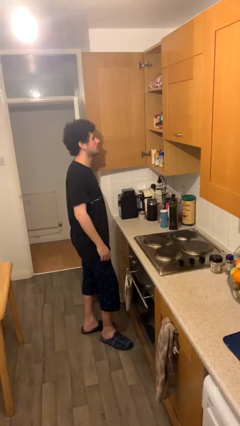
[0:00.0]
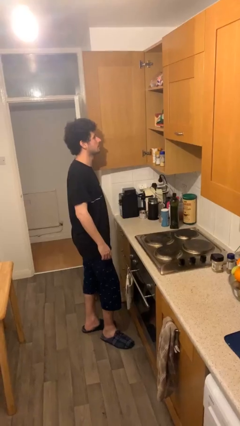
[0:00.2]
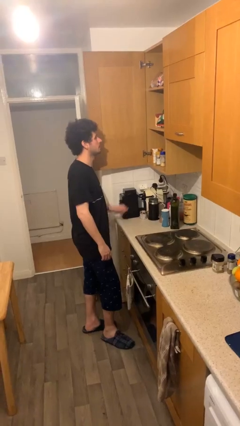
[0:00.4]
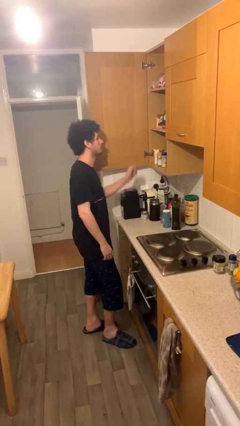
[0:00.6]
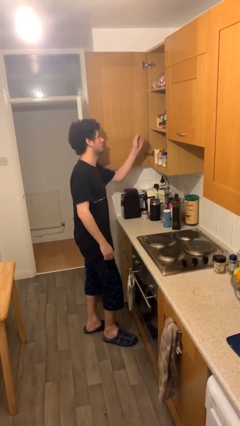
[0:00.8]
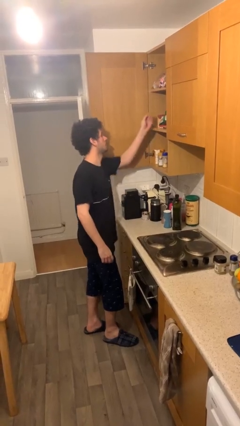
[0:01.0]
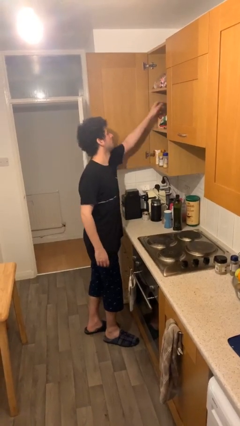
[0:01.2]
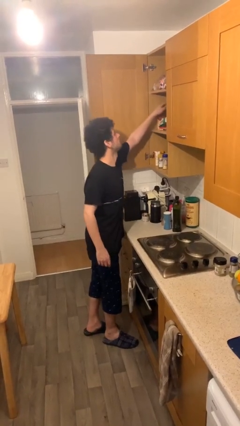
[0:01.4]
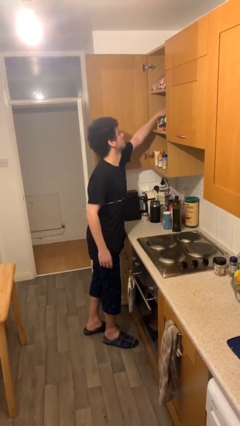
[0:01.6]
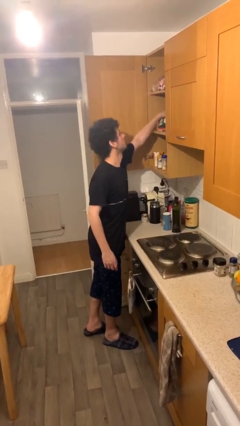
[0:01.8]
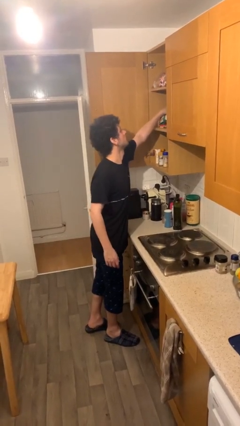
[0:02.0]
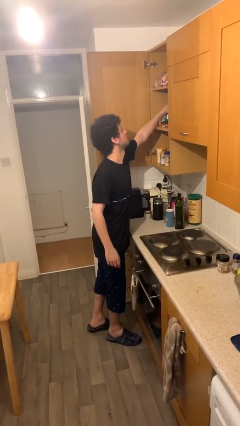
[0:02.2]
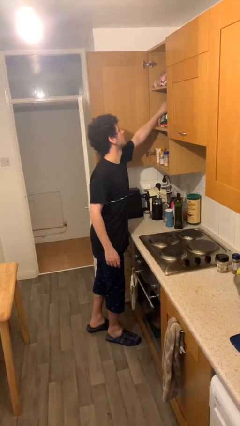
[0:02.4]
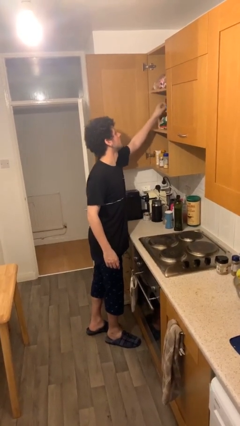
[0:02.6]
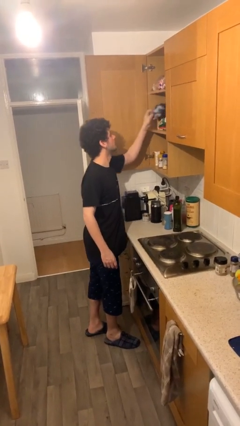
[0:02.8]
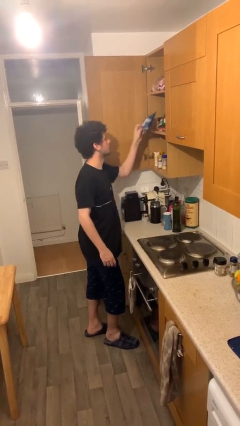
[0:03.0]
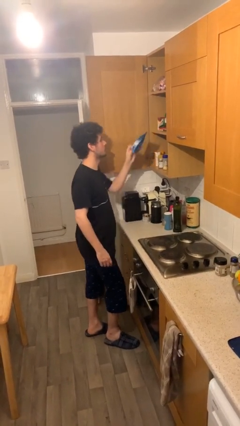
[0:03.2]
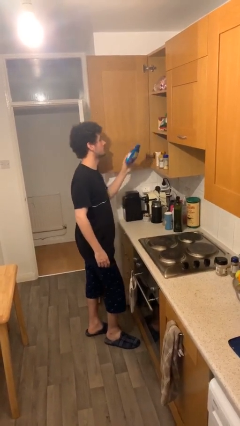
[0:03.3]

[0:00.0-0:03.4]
person picks up object from shelf

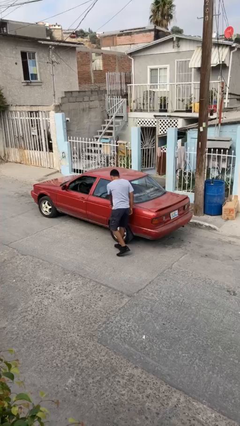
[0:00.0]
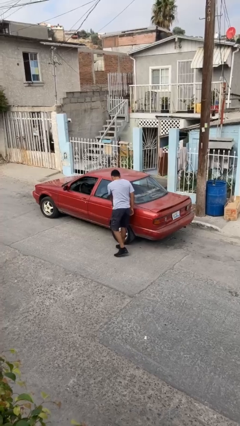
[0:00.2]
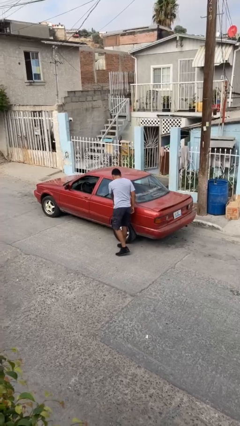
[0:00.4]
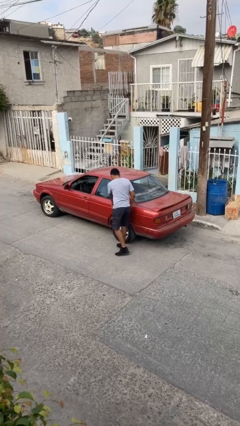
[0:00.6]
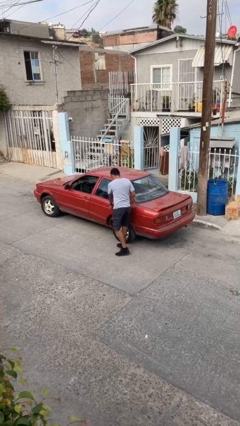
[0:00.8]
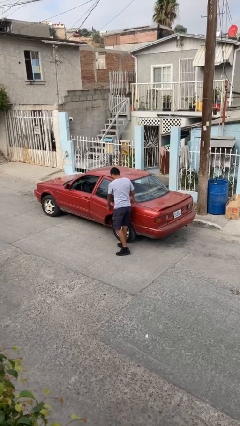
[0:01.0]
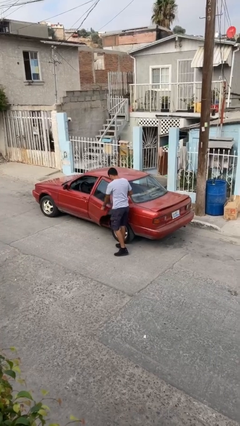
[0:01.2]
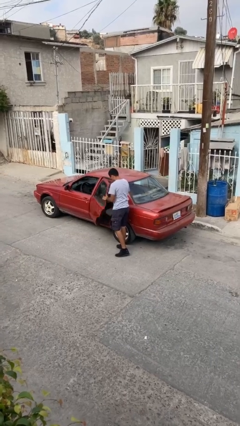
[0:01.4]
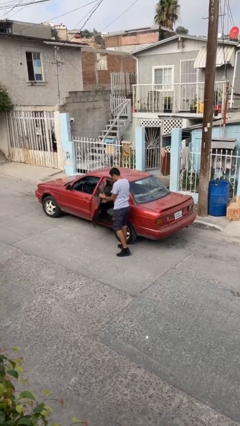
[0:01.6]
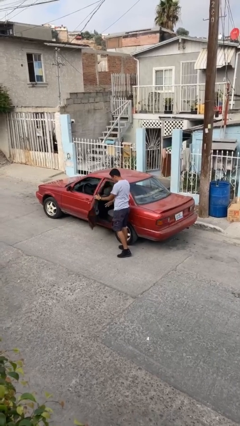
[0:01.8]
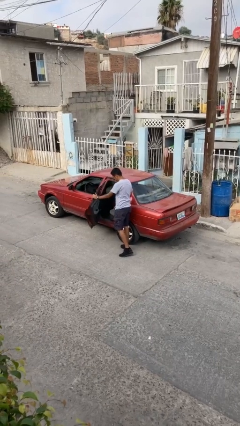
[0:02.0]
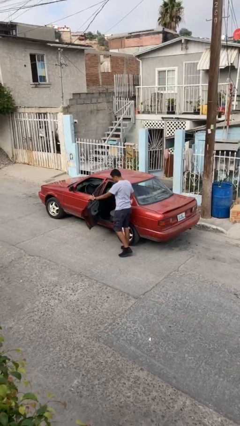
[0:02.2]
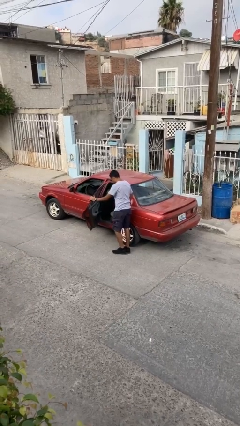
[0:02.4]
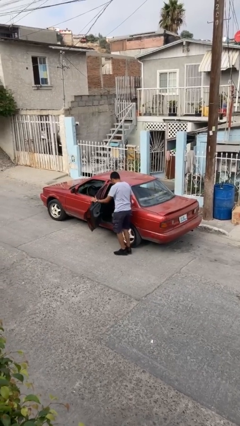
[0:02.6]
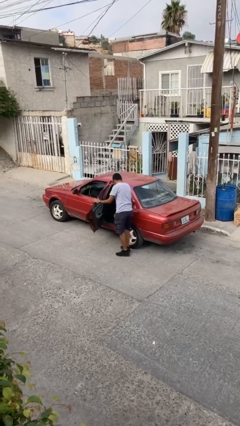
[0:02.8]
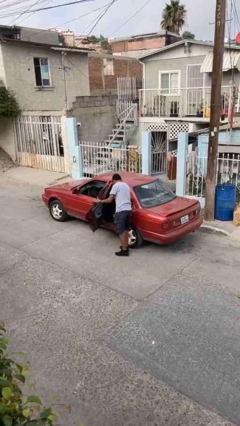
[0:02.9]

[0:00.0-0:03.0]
person opens car door

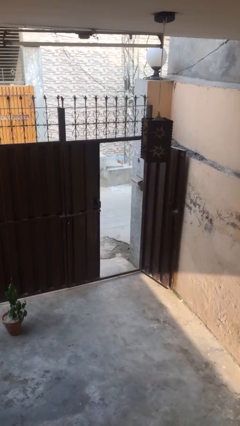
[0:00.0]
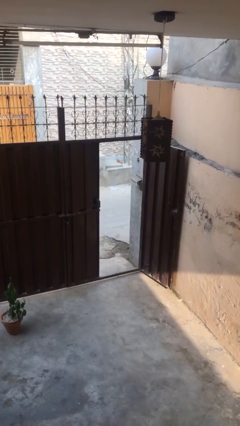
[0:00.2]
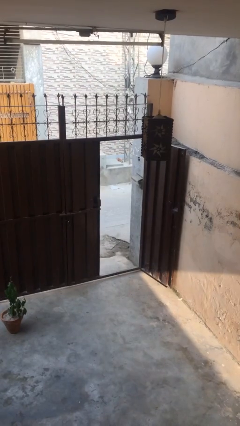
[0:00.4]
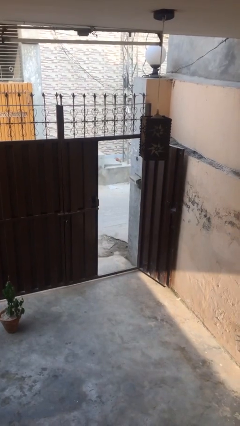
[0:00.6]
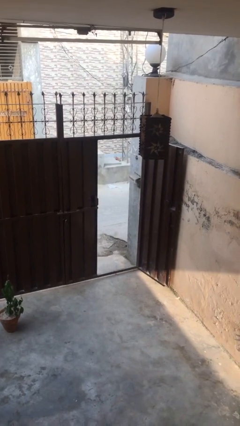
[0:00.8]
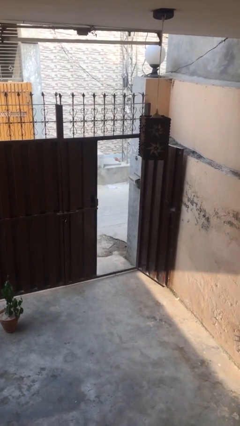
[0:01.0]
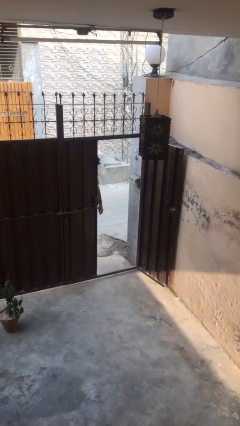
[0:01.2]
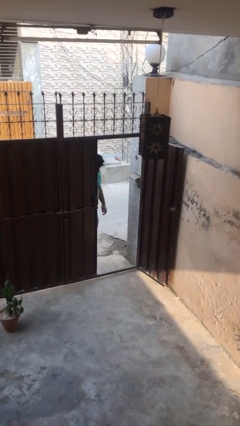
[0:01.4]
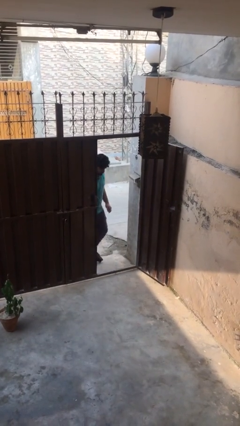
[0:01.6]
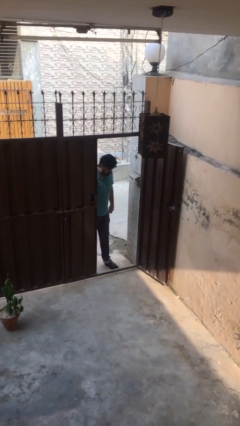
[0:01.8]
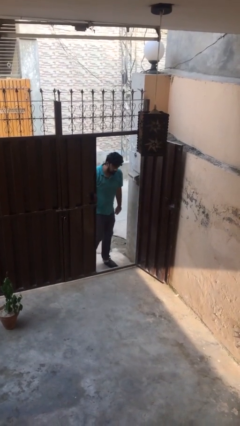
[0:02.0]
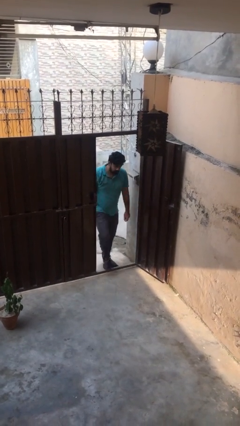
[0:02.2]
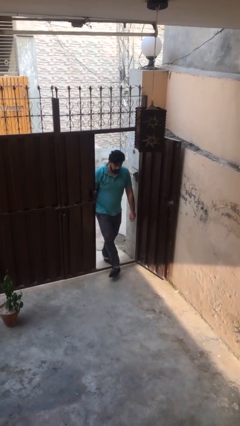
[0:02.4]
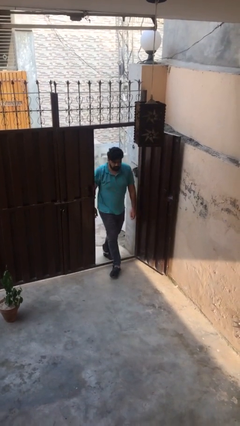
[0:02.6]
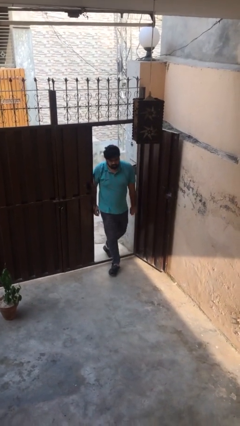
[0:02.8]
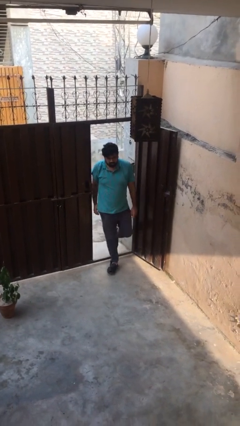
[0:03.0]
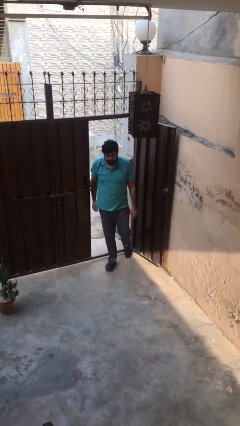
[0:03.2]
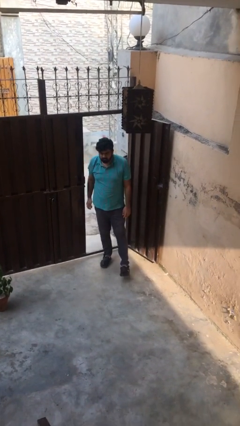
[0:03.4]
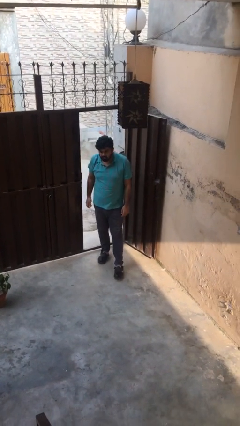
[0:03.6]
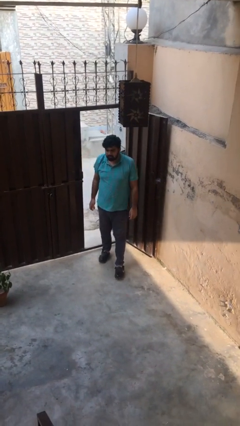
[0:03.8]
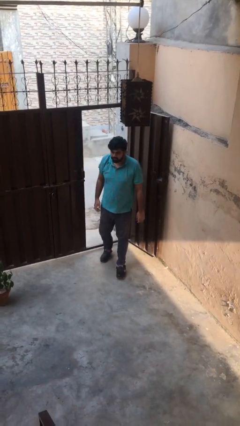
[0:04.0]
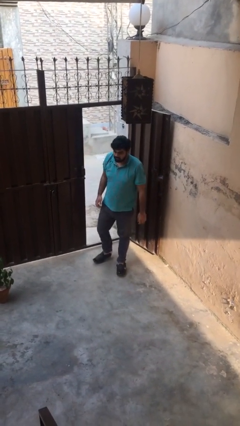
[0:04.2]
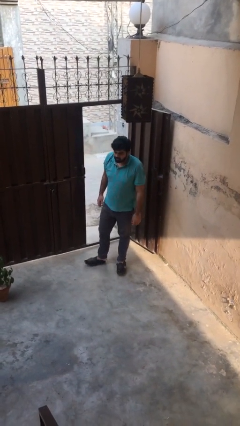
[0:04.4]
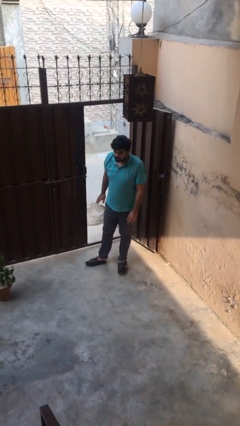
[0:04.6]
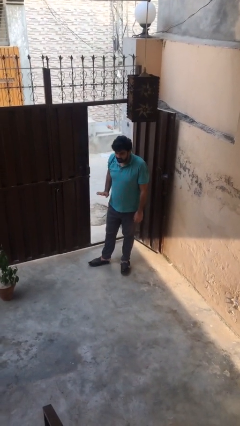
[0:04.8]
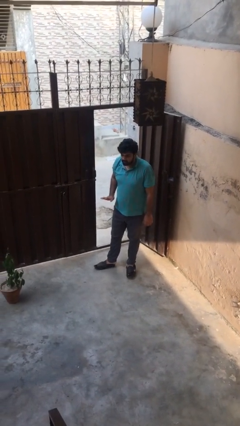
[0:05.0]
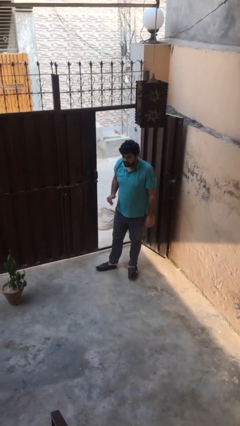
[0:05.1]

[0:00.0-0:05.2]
person enters scene through structure

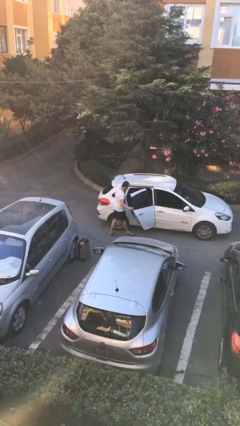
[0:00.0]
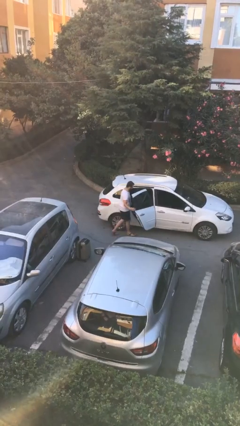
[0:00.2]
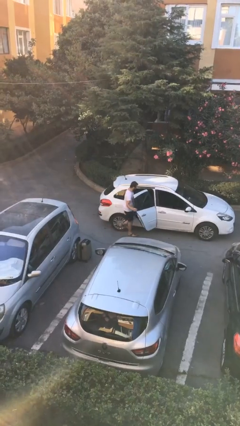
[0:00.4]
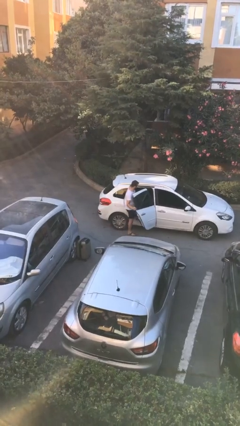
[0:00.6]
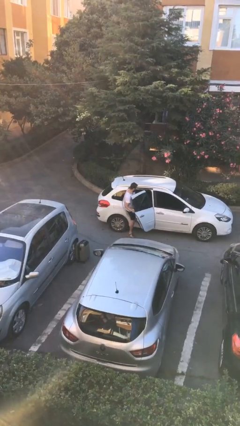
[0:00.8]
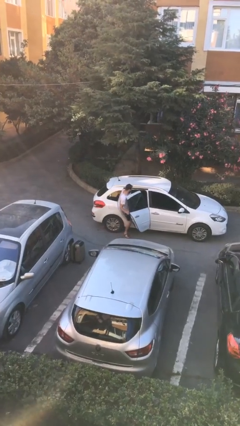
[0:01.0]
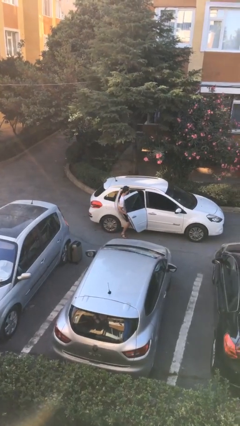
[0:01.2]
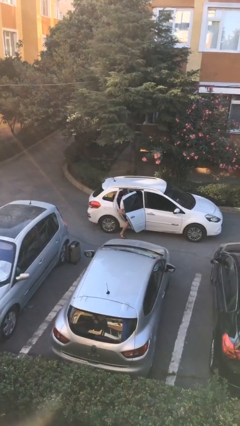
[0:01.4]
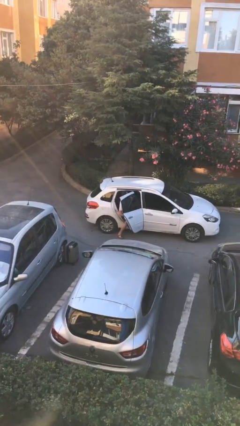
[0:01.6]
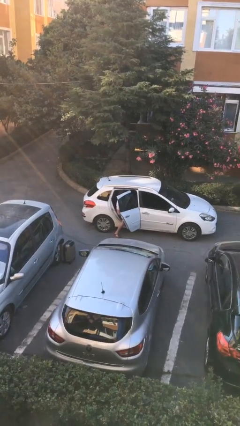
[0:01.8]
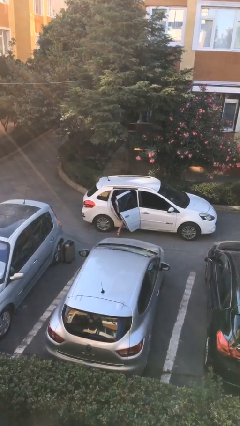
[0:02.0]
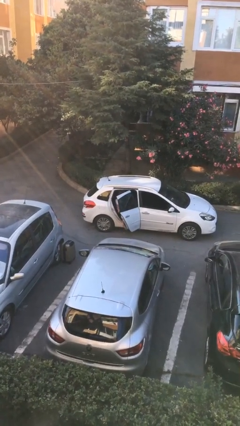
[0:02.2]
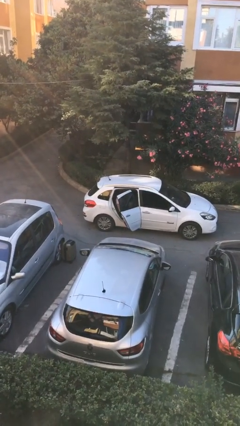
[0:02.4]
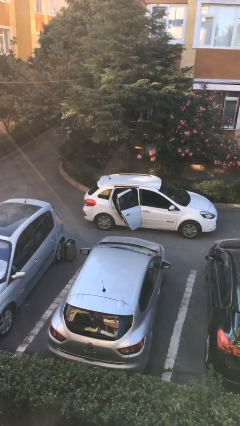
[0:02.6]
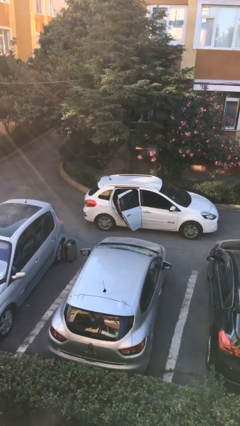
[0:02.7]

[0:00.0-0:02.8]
person enters car

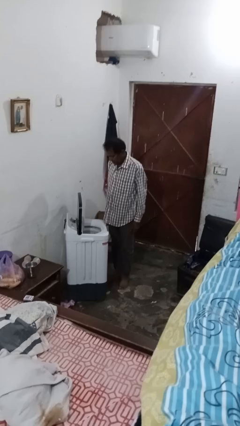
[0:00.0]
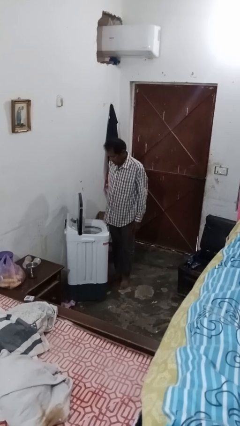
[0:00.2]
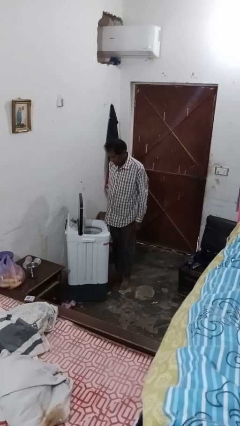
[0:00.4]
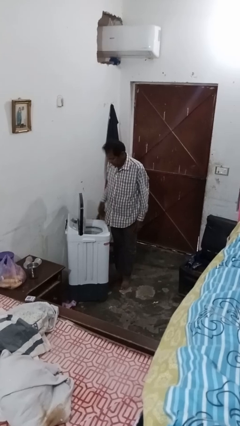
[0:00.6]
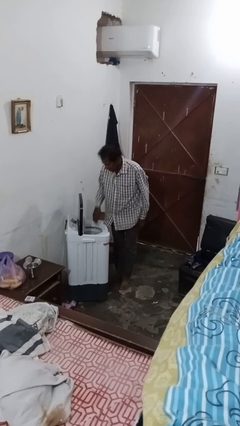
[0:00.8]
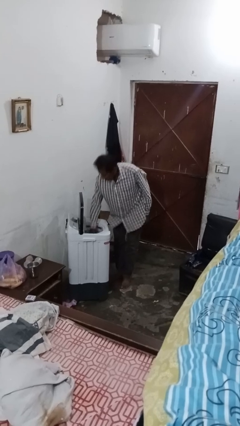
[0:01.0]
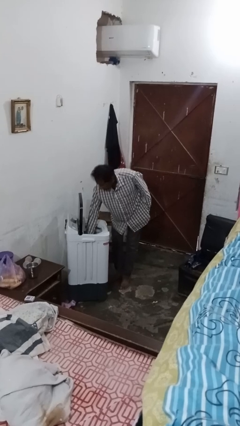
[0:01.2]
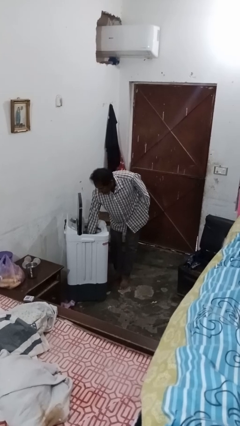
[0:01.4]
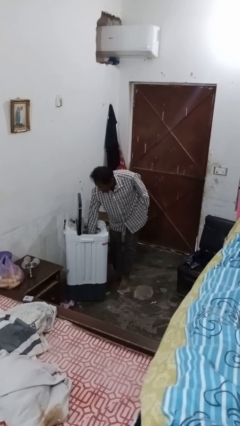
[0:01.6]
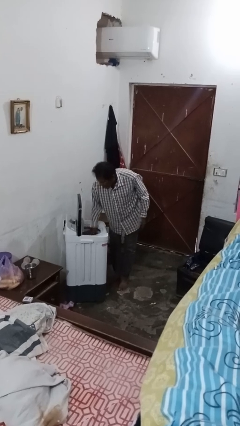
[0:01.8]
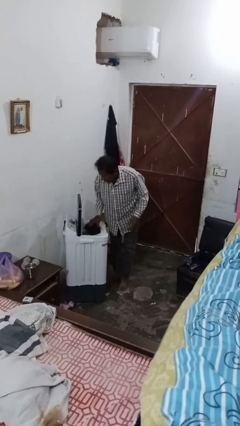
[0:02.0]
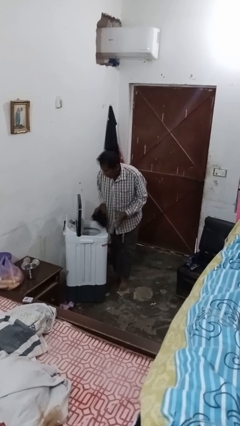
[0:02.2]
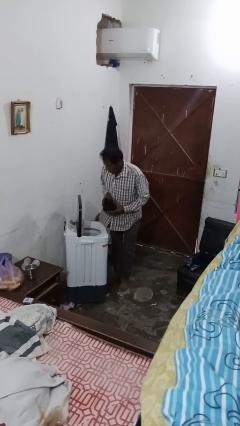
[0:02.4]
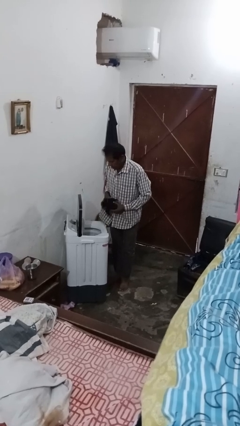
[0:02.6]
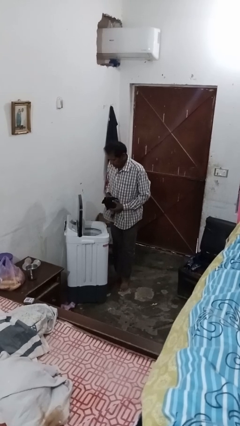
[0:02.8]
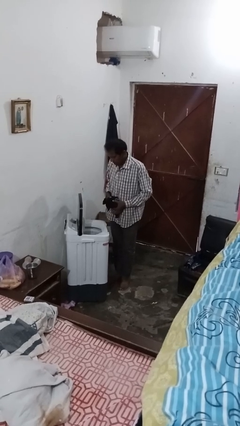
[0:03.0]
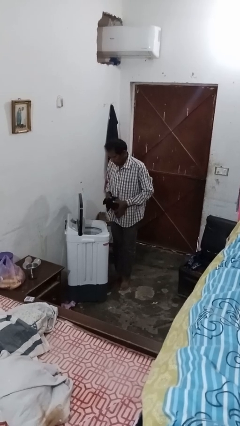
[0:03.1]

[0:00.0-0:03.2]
person unloads clotheswasher
